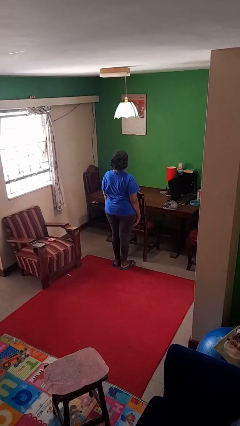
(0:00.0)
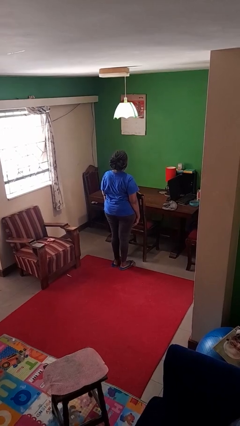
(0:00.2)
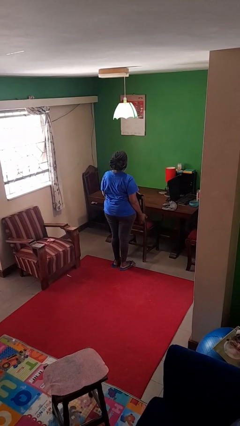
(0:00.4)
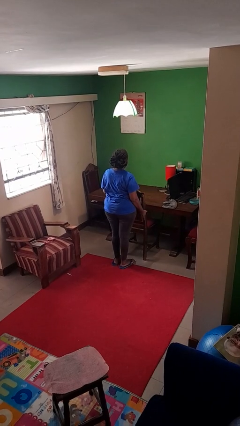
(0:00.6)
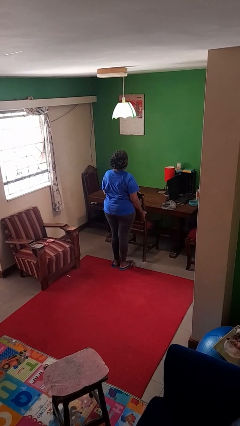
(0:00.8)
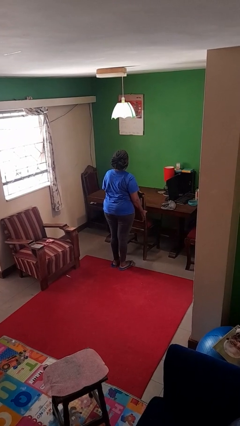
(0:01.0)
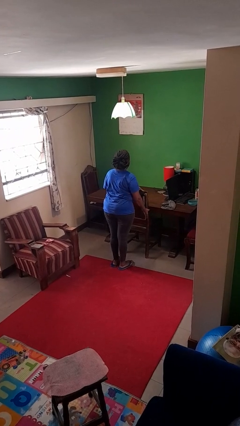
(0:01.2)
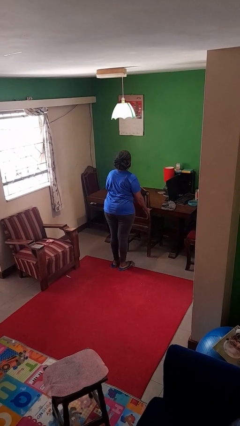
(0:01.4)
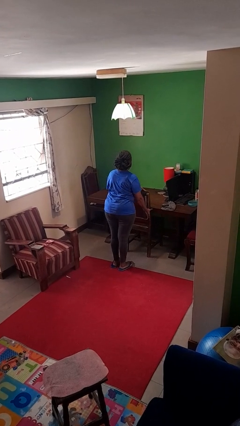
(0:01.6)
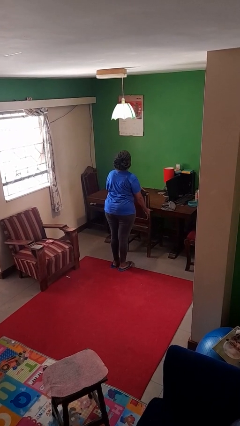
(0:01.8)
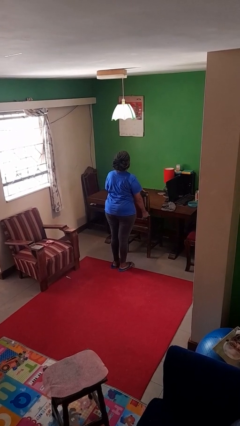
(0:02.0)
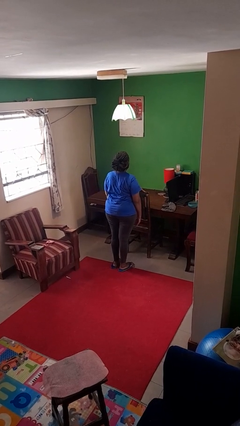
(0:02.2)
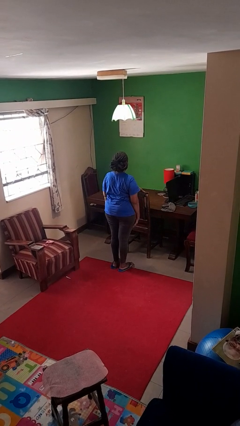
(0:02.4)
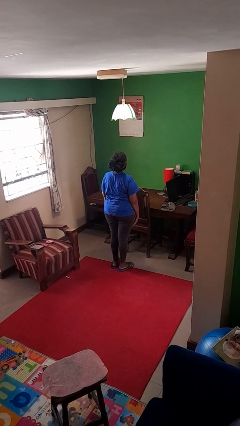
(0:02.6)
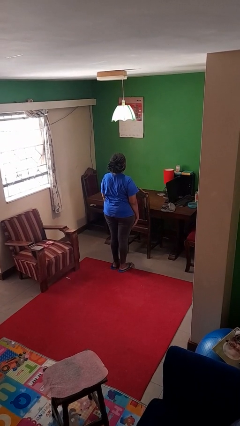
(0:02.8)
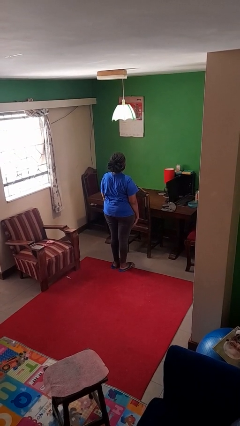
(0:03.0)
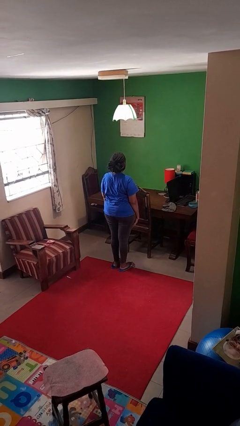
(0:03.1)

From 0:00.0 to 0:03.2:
person pushes in chair

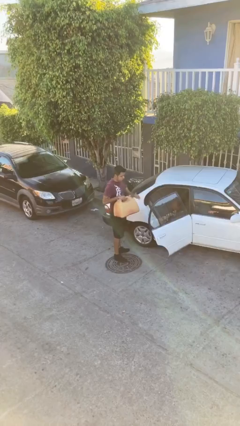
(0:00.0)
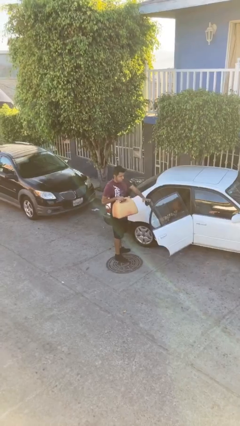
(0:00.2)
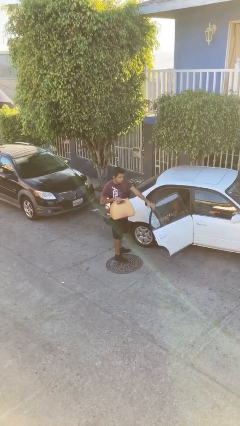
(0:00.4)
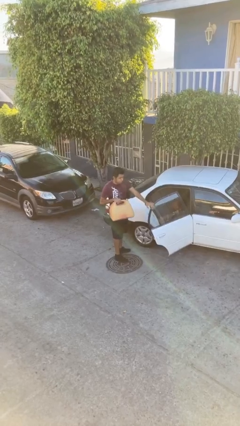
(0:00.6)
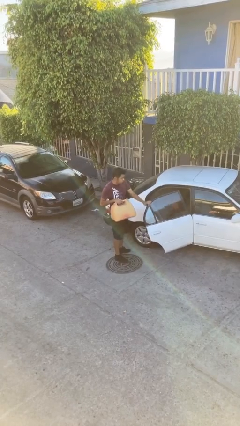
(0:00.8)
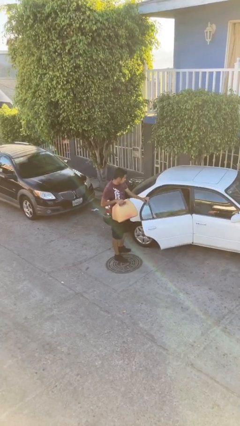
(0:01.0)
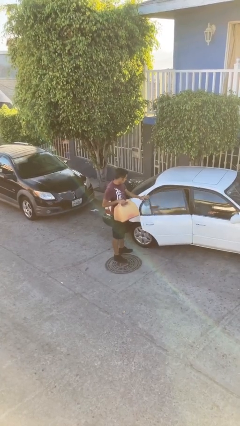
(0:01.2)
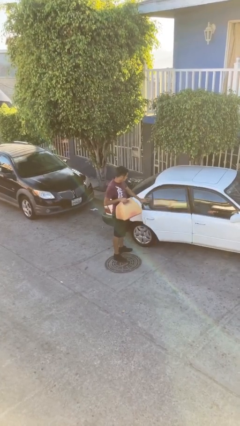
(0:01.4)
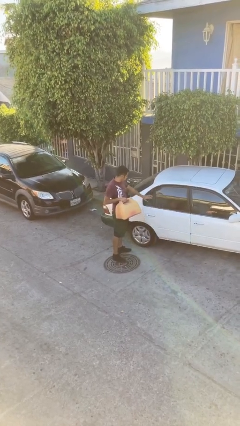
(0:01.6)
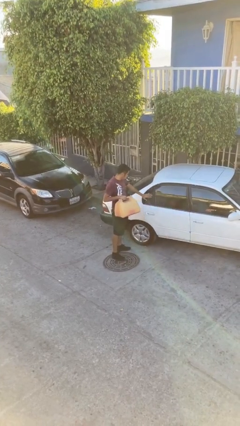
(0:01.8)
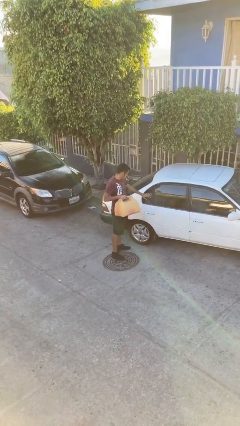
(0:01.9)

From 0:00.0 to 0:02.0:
person closes car door

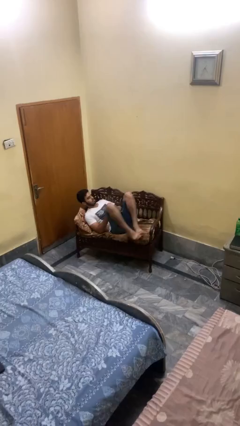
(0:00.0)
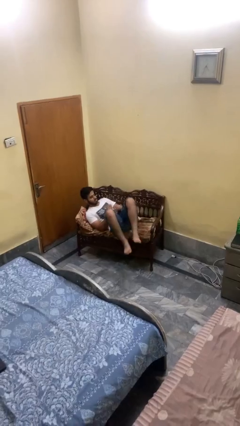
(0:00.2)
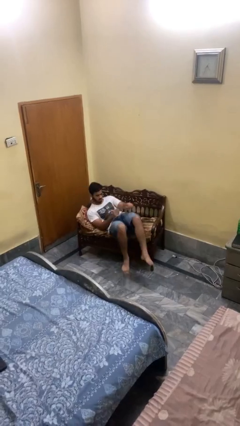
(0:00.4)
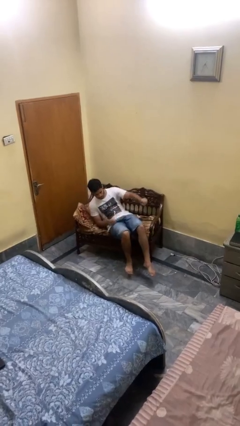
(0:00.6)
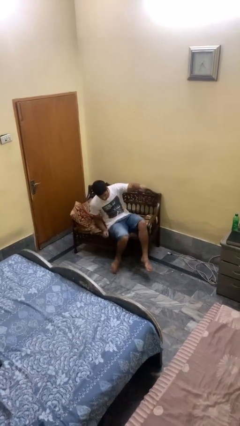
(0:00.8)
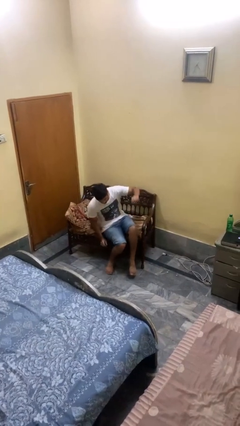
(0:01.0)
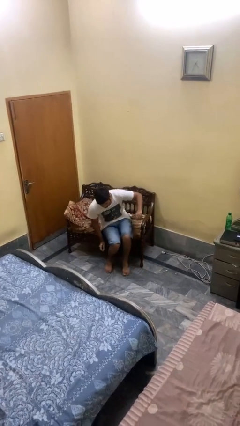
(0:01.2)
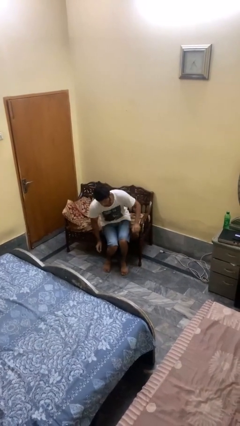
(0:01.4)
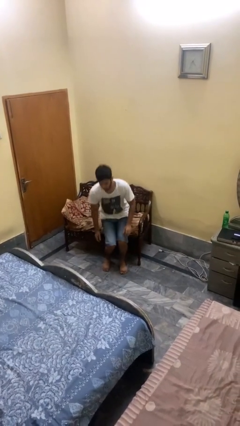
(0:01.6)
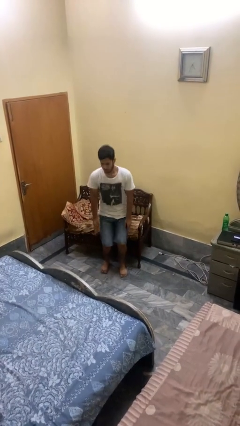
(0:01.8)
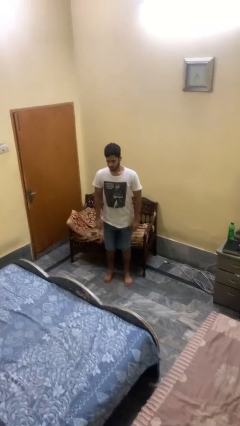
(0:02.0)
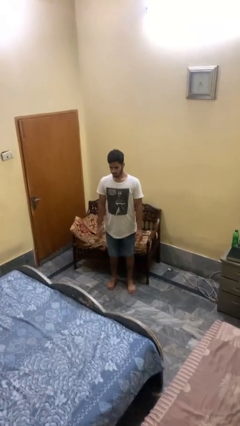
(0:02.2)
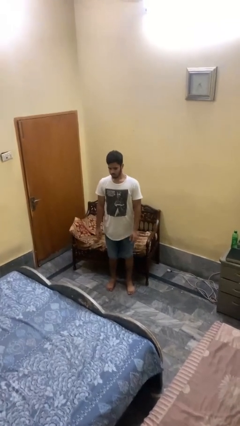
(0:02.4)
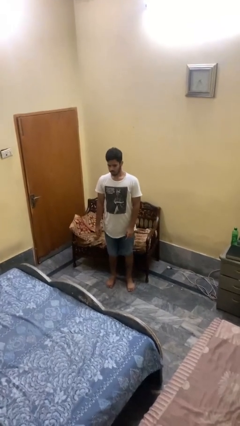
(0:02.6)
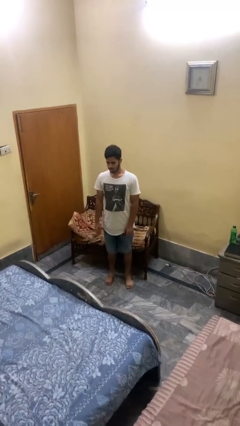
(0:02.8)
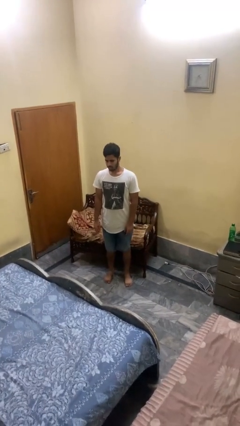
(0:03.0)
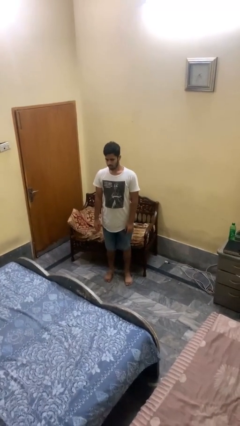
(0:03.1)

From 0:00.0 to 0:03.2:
person stands up

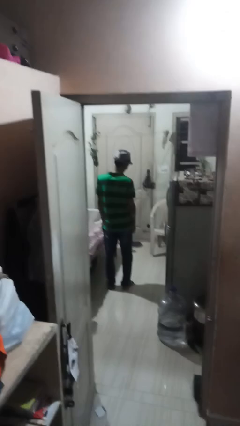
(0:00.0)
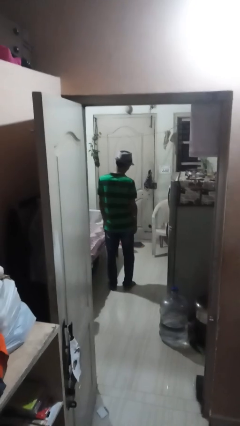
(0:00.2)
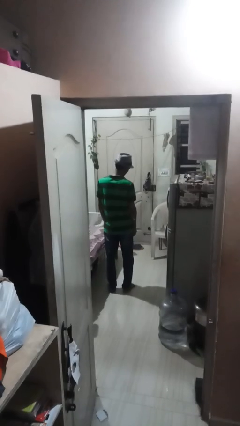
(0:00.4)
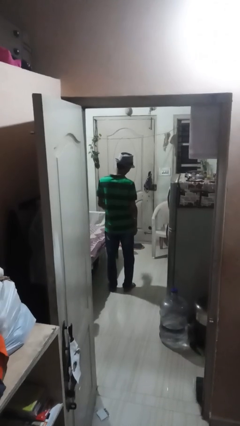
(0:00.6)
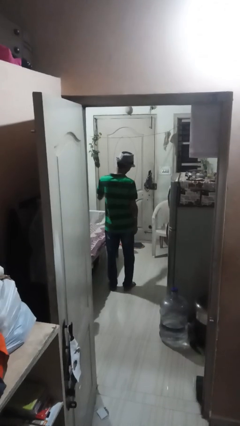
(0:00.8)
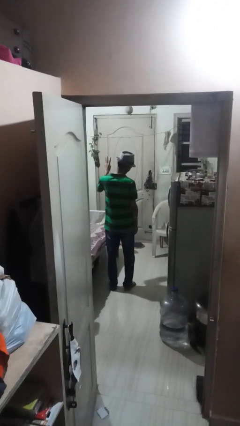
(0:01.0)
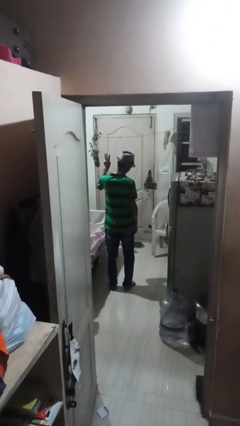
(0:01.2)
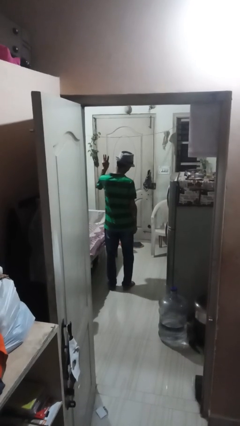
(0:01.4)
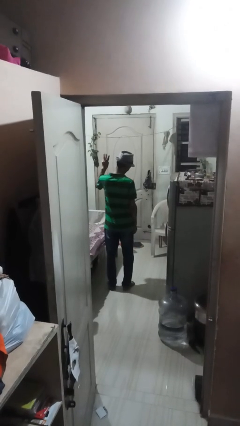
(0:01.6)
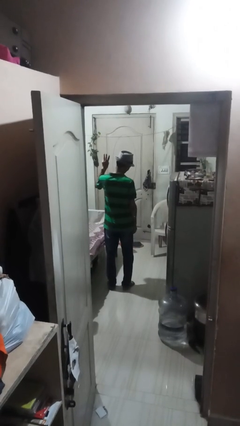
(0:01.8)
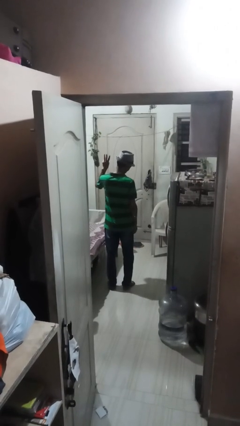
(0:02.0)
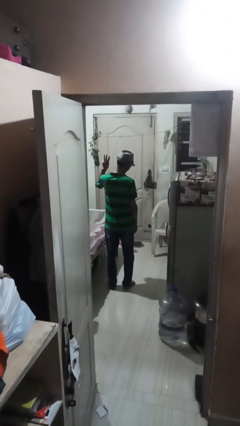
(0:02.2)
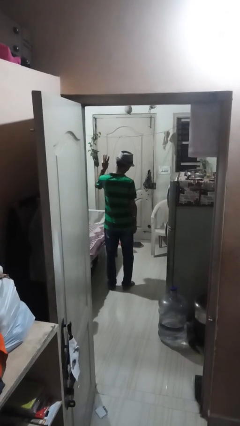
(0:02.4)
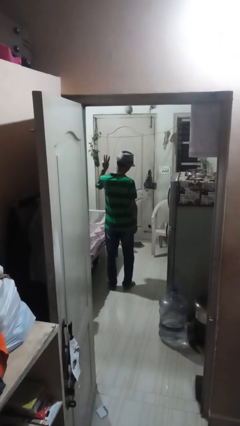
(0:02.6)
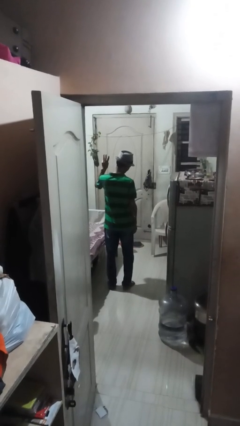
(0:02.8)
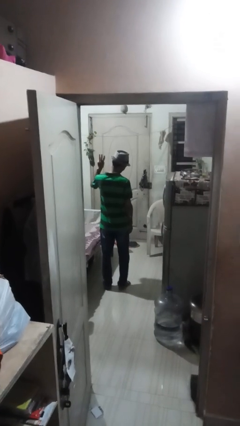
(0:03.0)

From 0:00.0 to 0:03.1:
person gestures number three

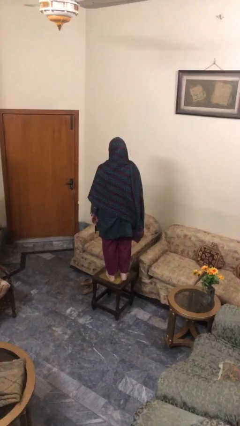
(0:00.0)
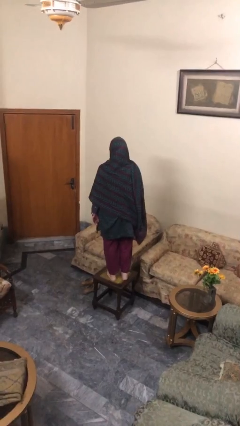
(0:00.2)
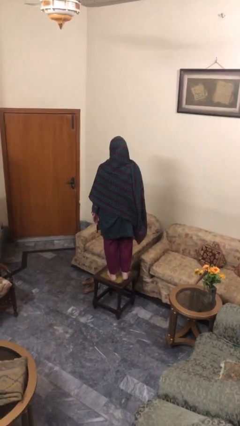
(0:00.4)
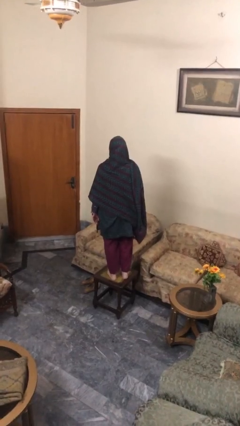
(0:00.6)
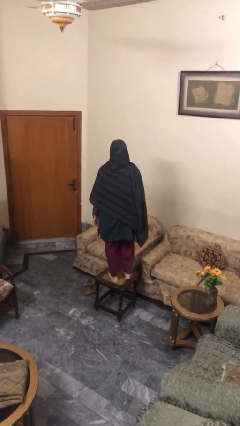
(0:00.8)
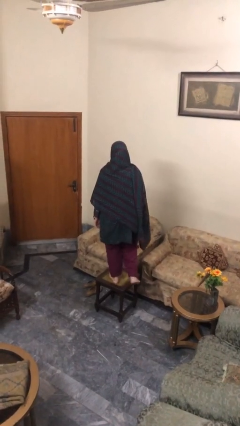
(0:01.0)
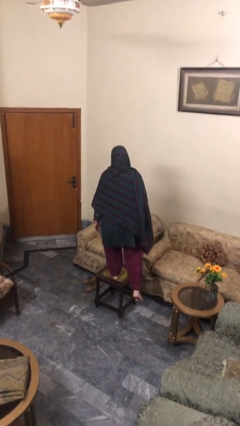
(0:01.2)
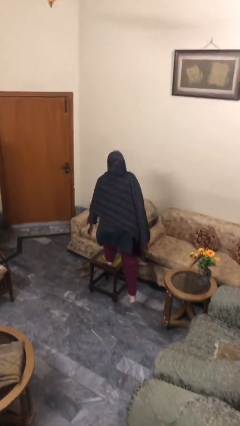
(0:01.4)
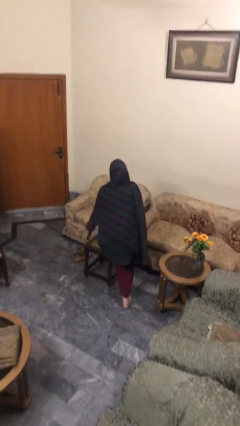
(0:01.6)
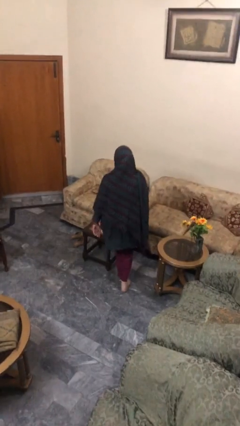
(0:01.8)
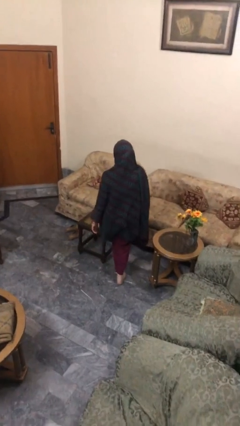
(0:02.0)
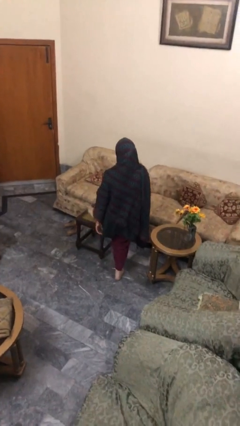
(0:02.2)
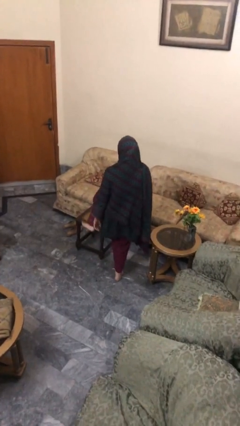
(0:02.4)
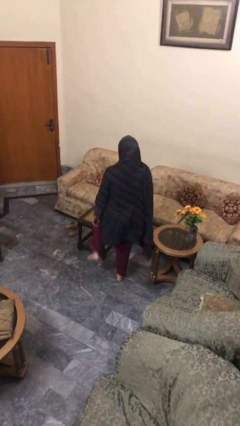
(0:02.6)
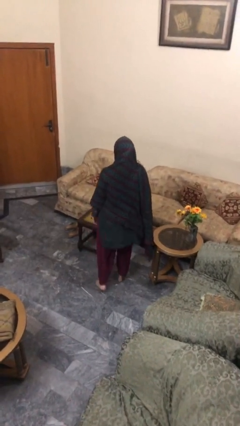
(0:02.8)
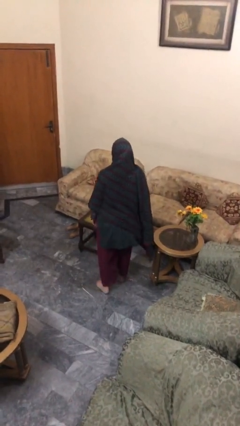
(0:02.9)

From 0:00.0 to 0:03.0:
person climbs off table

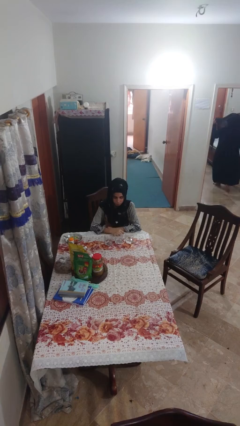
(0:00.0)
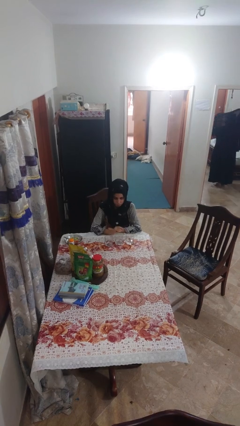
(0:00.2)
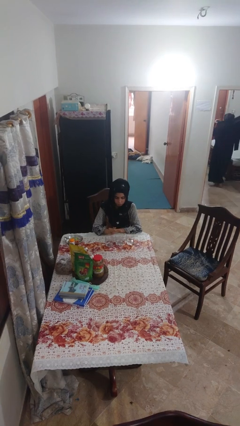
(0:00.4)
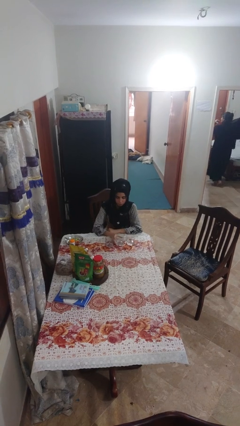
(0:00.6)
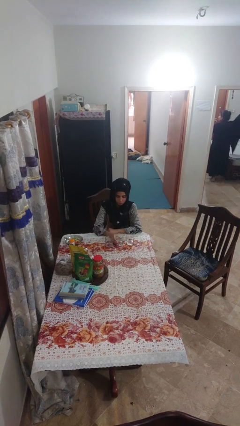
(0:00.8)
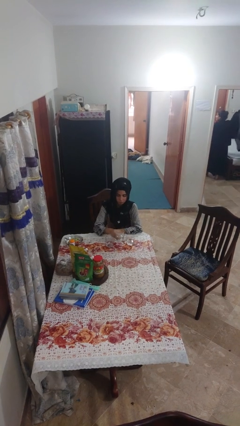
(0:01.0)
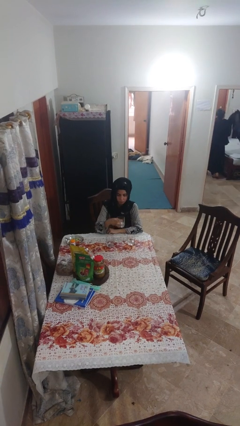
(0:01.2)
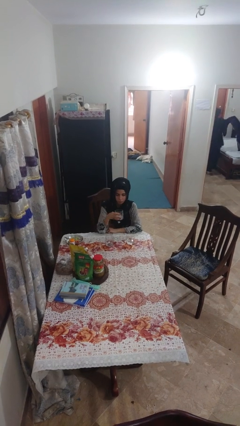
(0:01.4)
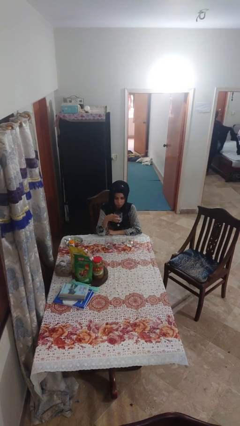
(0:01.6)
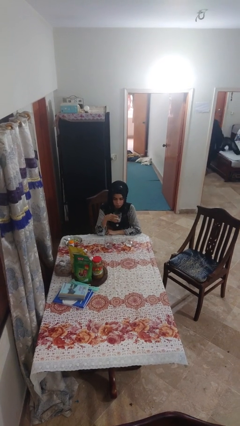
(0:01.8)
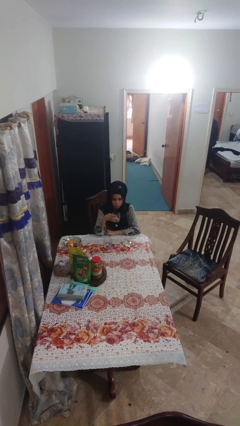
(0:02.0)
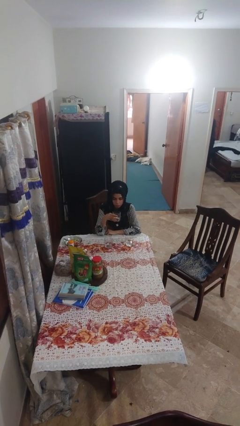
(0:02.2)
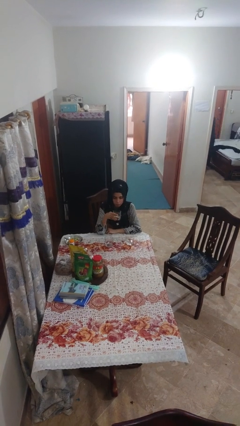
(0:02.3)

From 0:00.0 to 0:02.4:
person picks up object from table

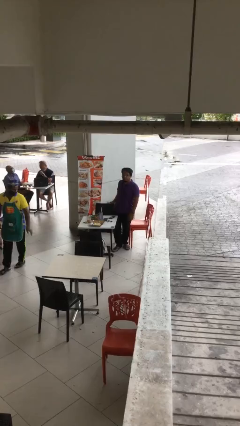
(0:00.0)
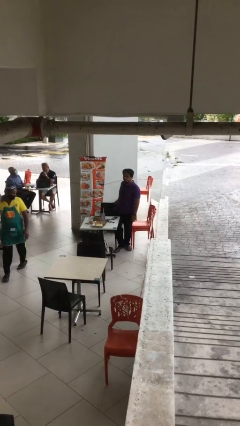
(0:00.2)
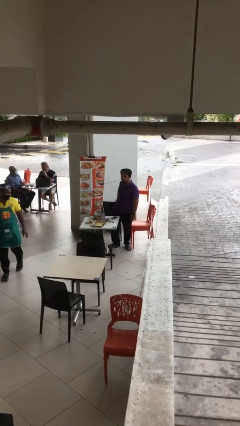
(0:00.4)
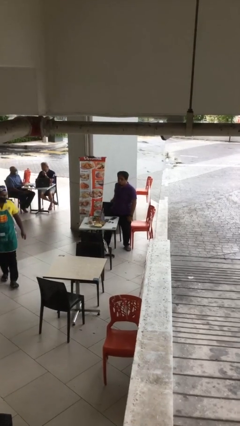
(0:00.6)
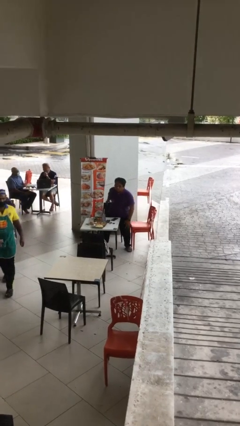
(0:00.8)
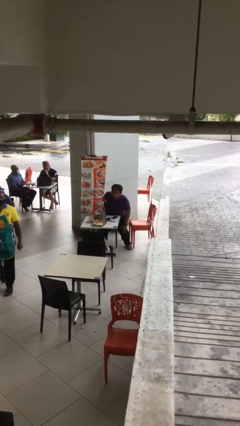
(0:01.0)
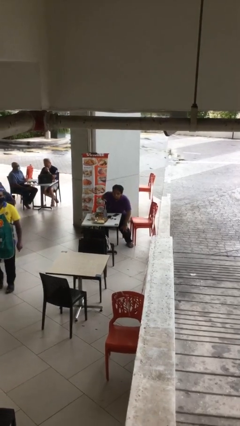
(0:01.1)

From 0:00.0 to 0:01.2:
person sits down
